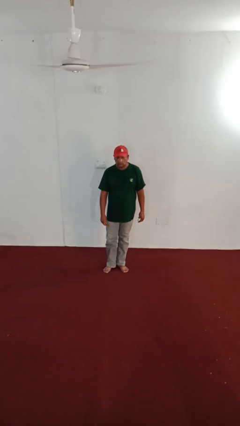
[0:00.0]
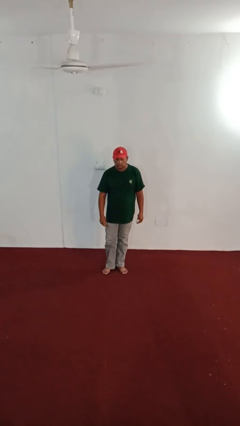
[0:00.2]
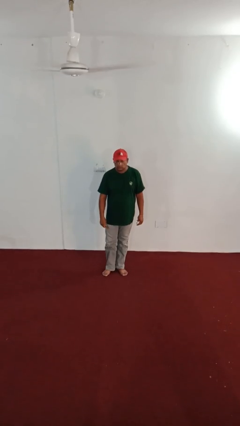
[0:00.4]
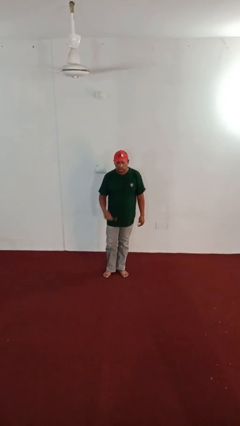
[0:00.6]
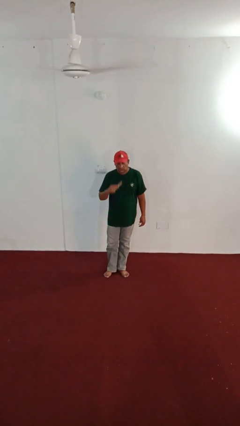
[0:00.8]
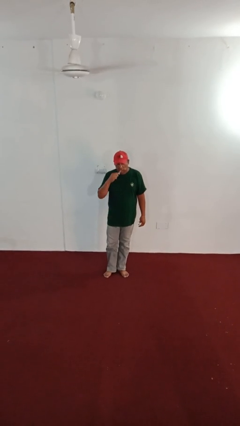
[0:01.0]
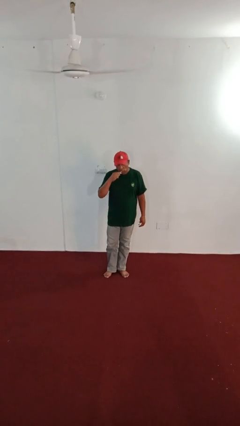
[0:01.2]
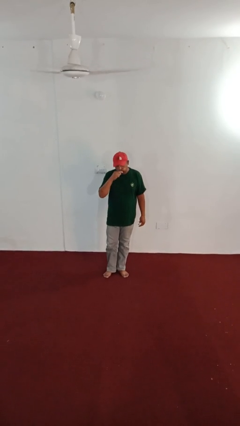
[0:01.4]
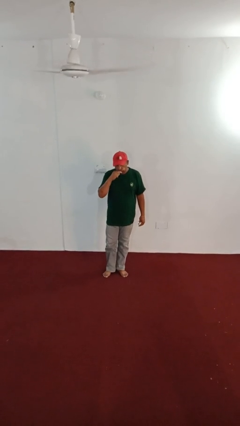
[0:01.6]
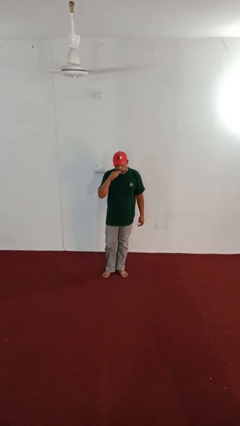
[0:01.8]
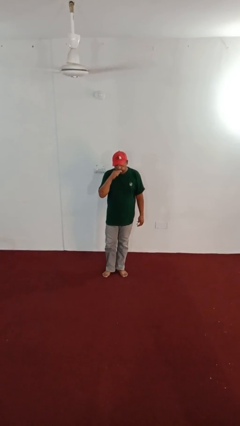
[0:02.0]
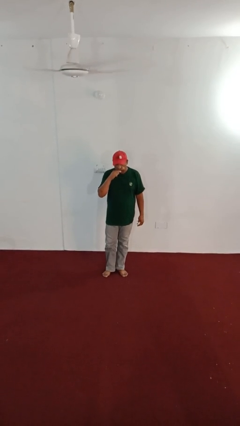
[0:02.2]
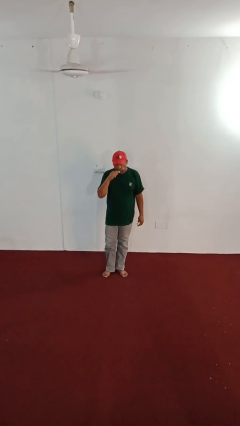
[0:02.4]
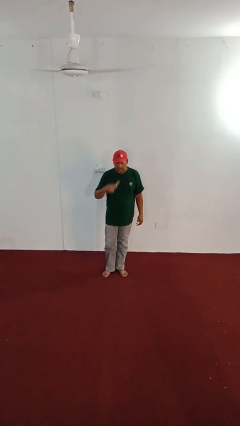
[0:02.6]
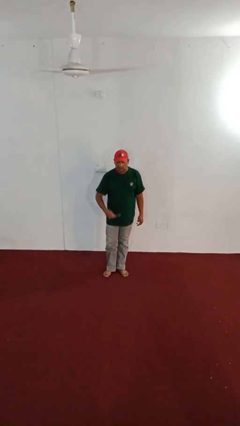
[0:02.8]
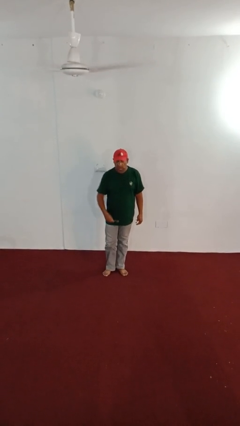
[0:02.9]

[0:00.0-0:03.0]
person brushes teeth

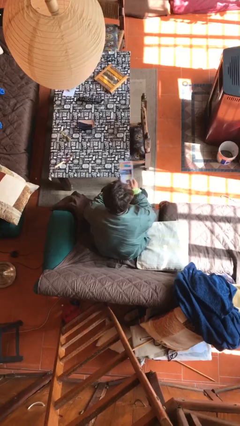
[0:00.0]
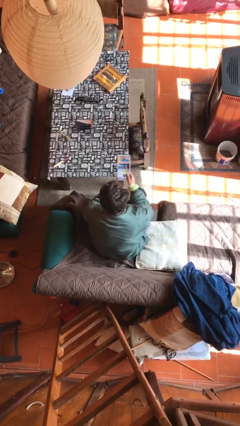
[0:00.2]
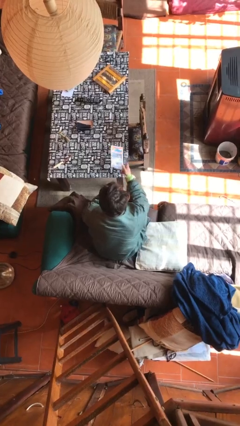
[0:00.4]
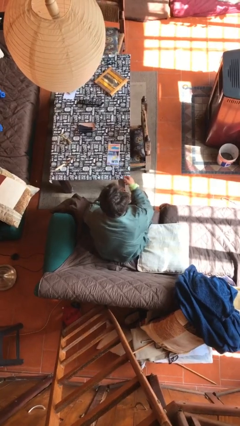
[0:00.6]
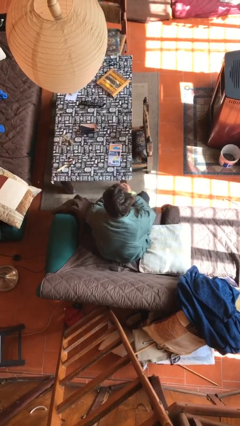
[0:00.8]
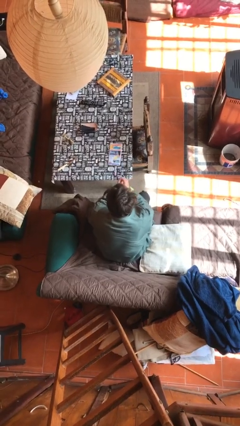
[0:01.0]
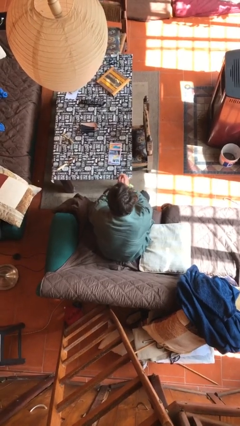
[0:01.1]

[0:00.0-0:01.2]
person puts down object on table

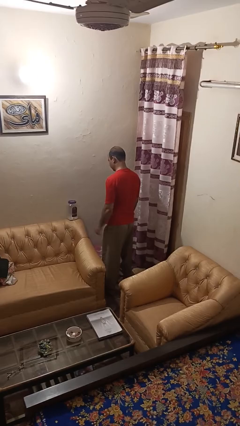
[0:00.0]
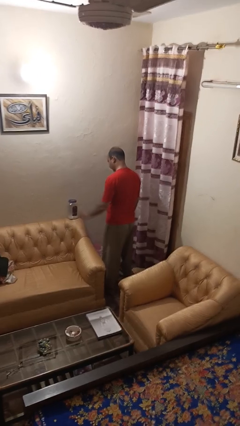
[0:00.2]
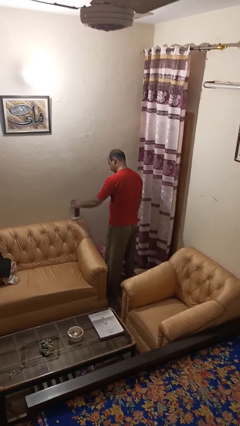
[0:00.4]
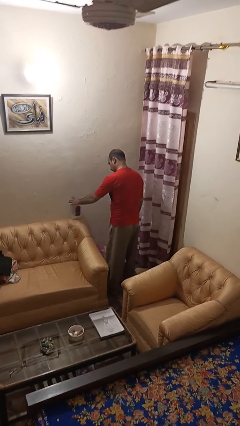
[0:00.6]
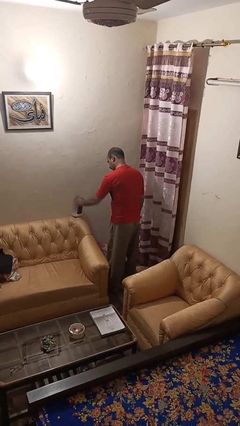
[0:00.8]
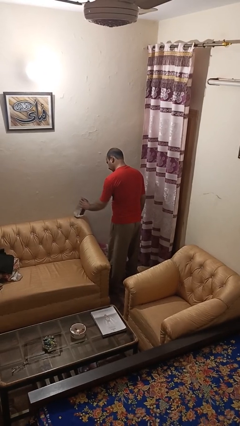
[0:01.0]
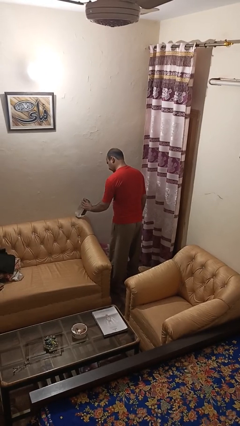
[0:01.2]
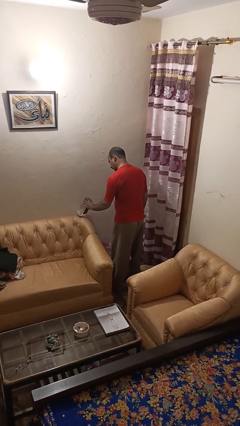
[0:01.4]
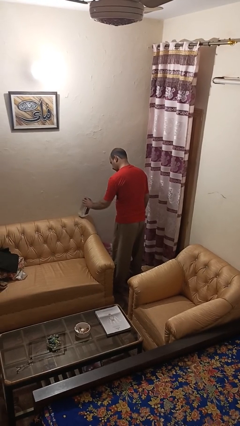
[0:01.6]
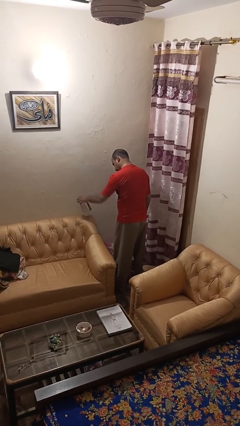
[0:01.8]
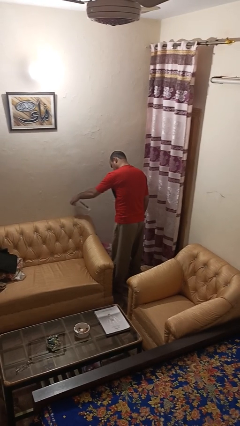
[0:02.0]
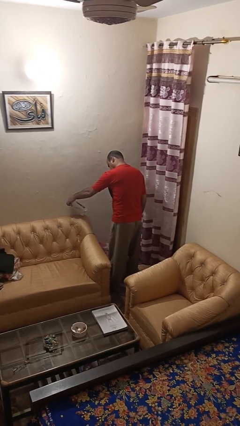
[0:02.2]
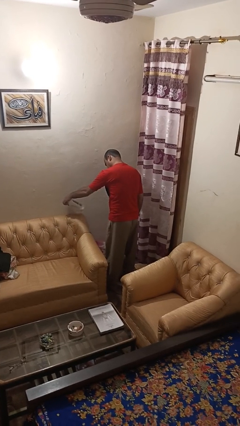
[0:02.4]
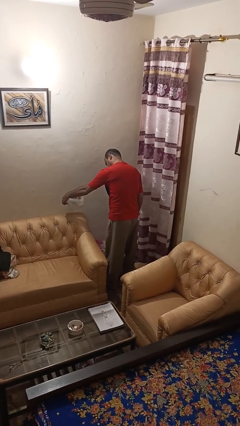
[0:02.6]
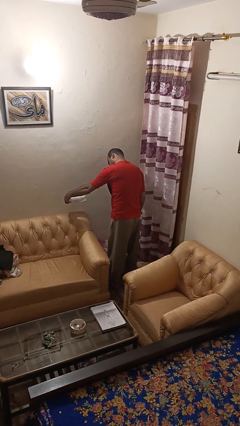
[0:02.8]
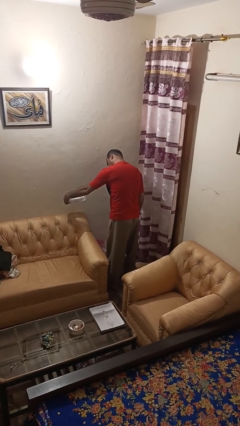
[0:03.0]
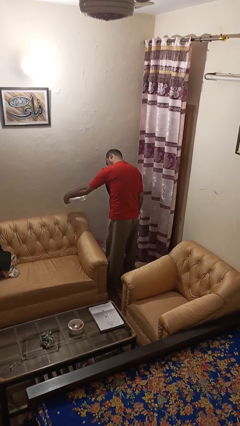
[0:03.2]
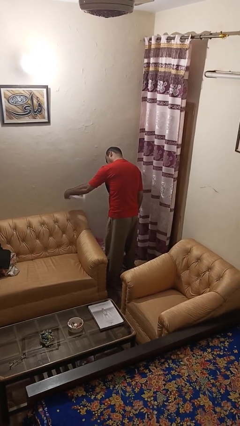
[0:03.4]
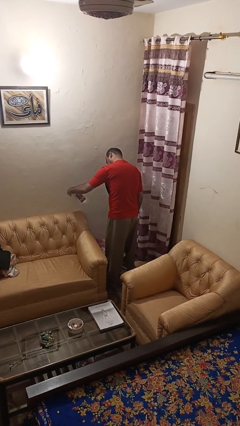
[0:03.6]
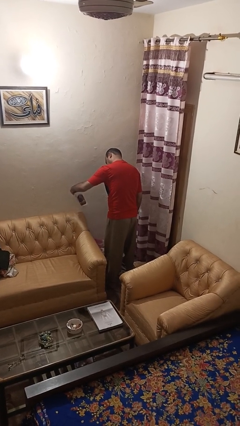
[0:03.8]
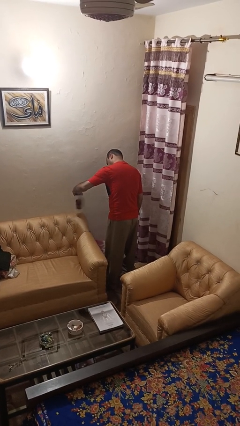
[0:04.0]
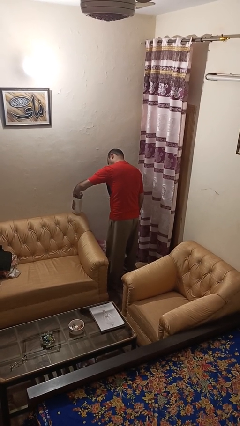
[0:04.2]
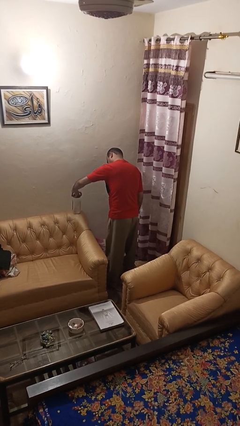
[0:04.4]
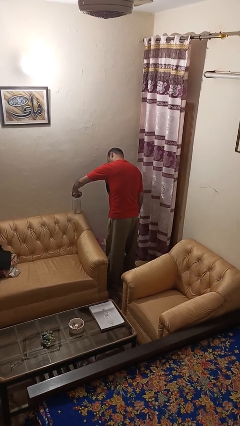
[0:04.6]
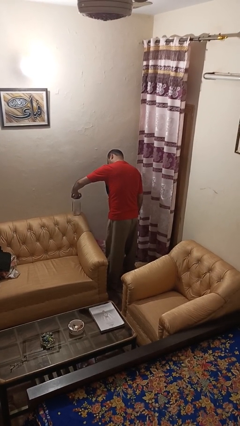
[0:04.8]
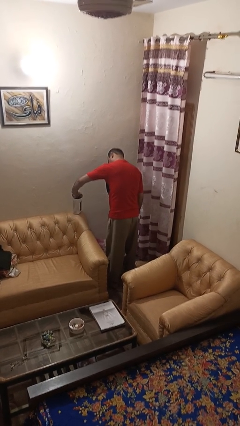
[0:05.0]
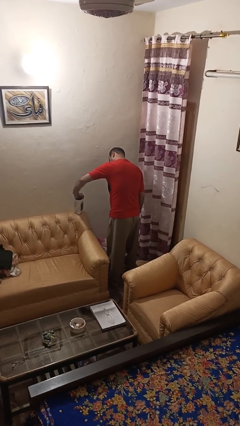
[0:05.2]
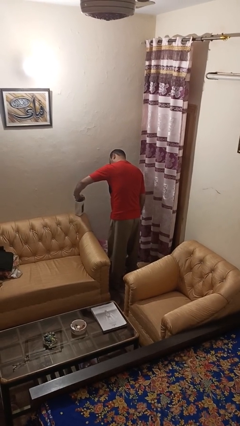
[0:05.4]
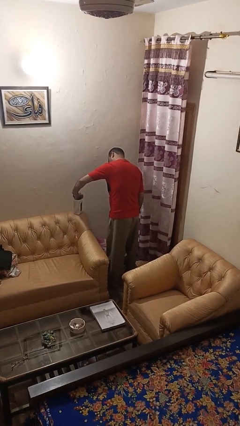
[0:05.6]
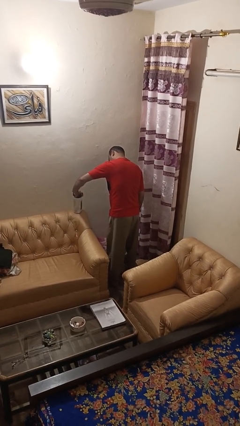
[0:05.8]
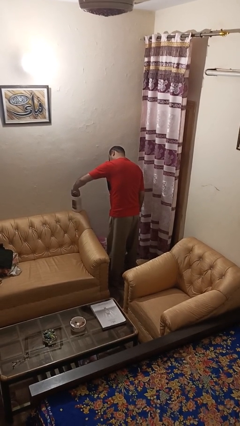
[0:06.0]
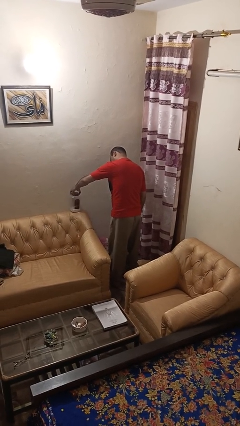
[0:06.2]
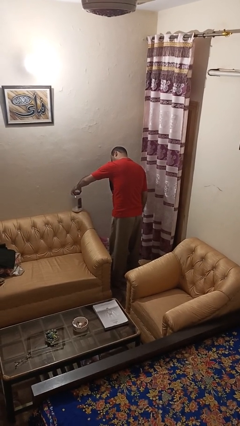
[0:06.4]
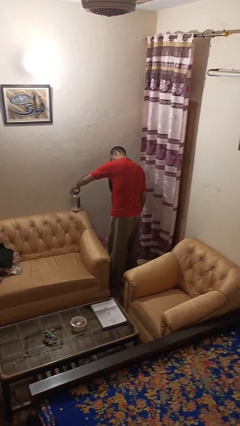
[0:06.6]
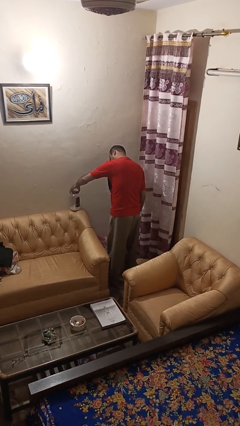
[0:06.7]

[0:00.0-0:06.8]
person taps object with finger

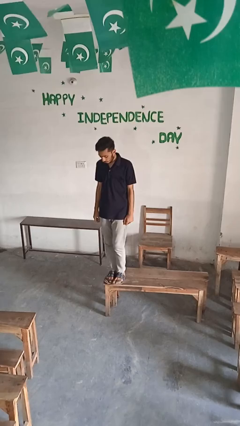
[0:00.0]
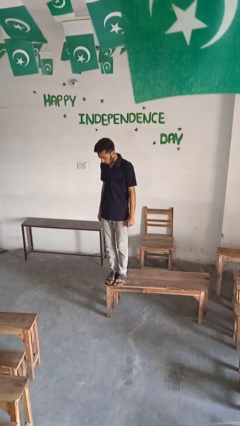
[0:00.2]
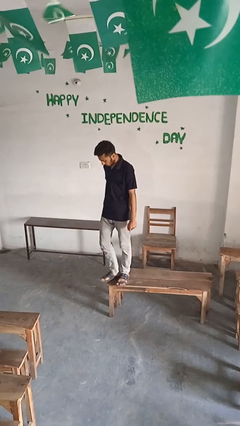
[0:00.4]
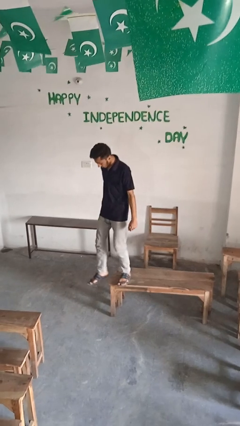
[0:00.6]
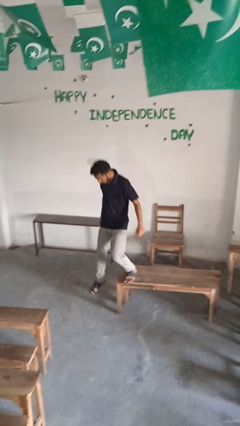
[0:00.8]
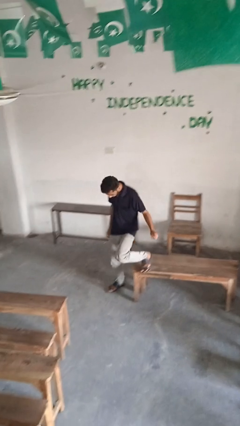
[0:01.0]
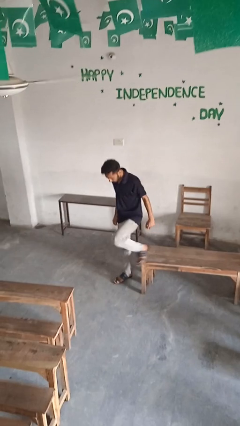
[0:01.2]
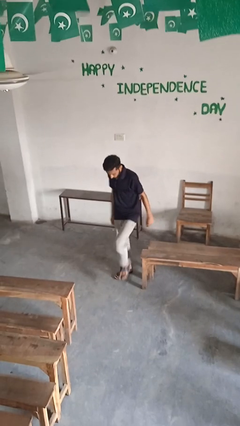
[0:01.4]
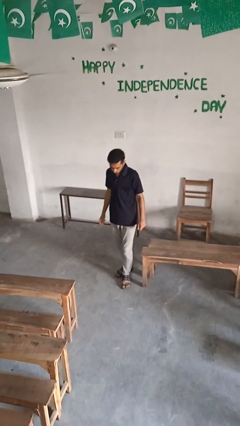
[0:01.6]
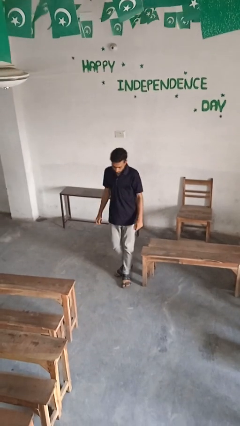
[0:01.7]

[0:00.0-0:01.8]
person climbs off table

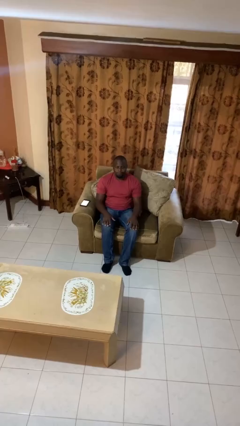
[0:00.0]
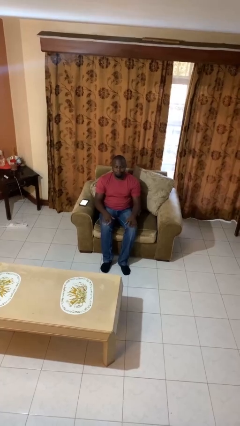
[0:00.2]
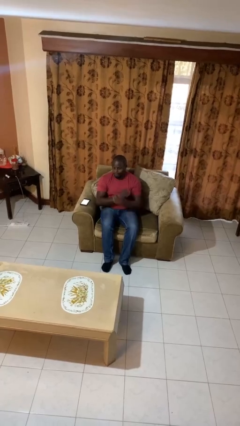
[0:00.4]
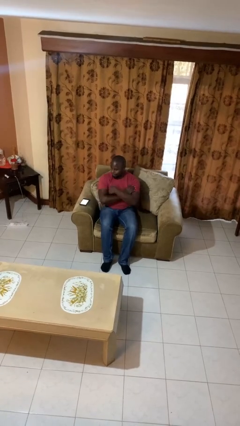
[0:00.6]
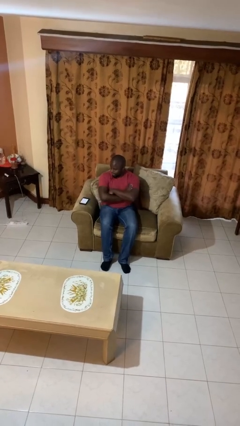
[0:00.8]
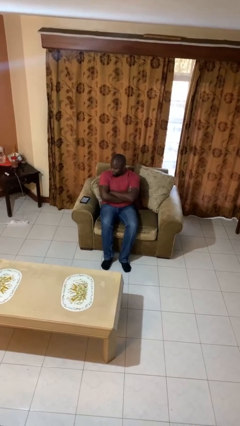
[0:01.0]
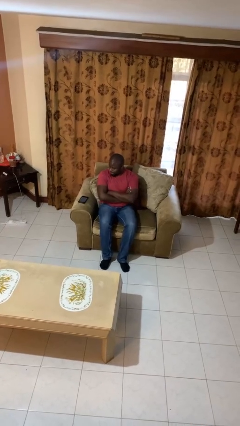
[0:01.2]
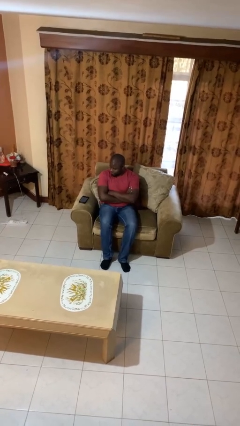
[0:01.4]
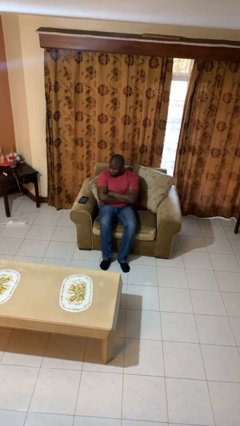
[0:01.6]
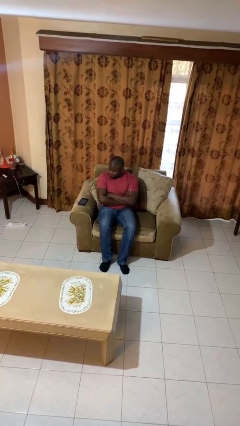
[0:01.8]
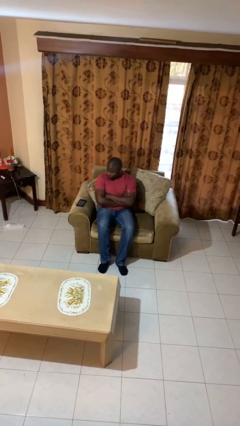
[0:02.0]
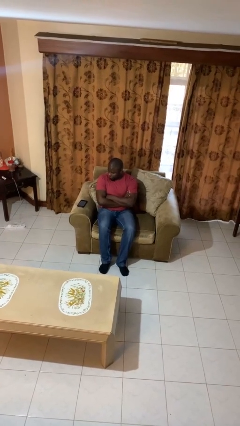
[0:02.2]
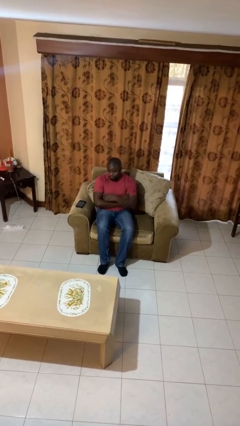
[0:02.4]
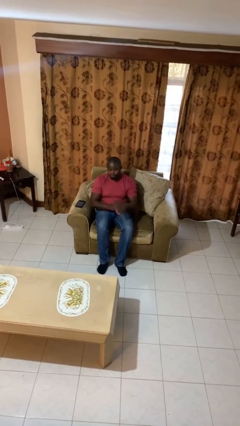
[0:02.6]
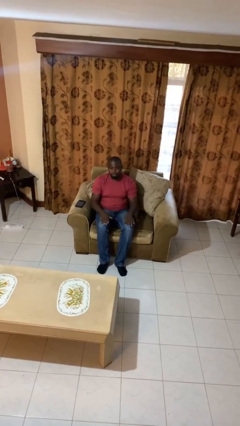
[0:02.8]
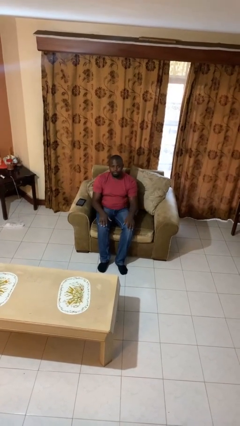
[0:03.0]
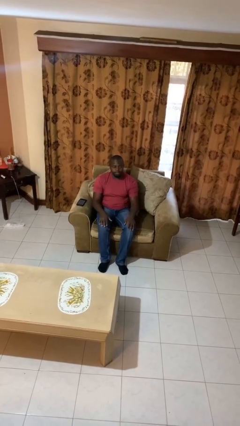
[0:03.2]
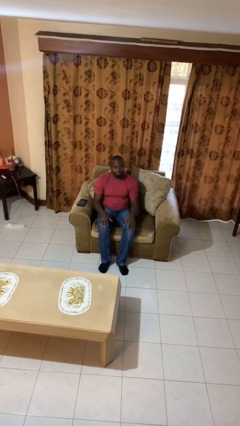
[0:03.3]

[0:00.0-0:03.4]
person crosses arms

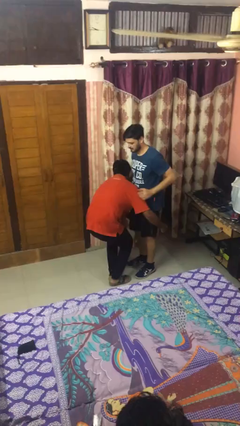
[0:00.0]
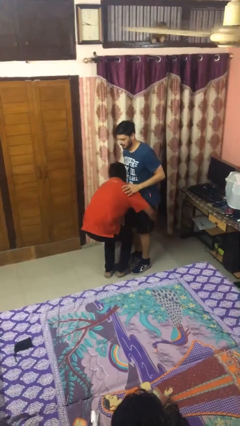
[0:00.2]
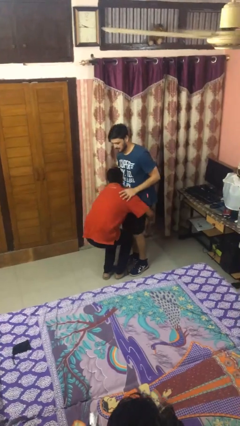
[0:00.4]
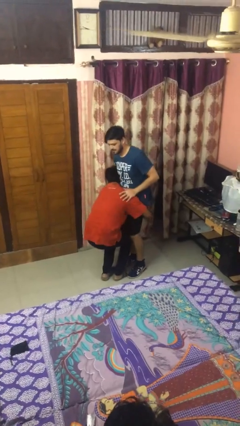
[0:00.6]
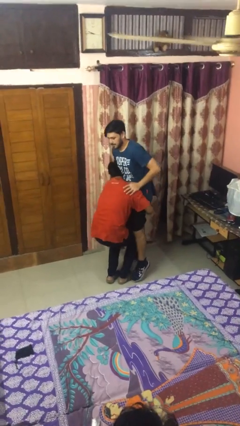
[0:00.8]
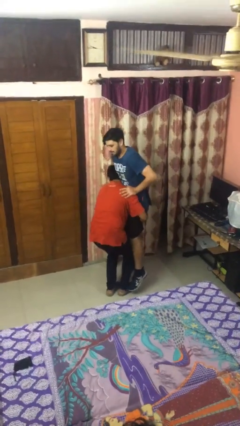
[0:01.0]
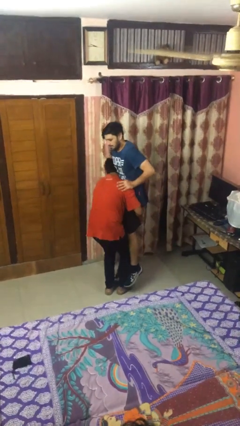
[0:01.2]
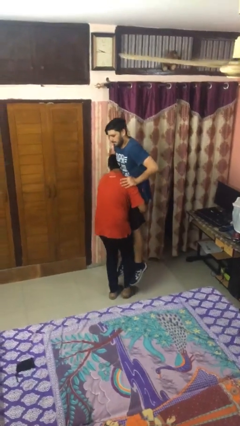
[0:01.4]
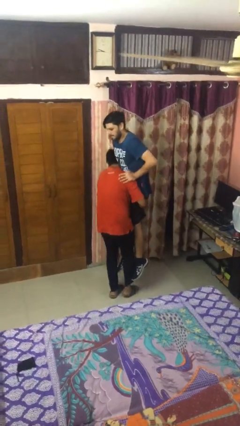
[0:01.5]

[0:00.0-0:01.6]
person picks up person
